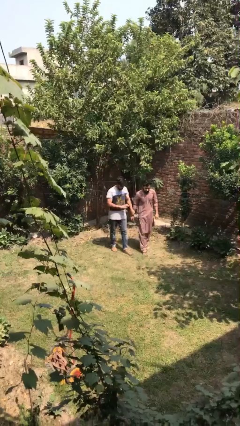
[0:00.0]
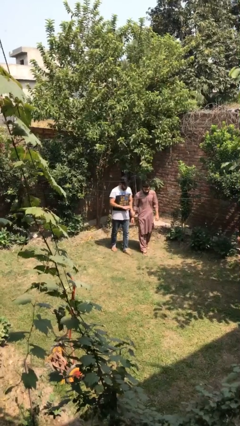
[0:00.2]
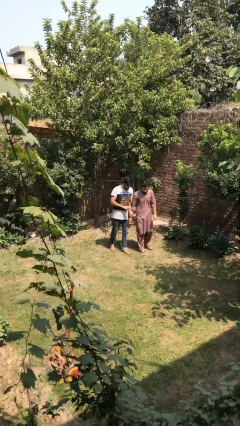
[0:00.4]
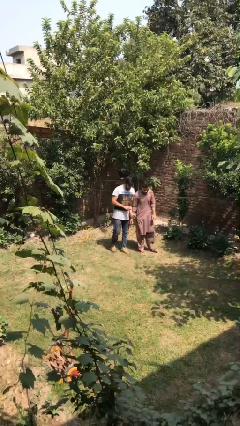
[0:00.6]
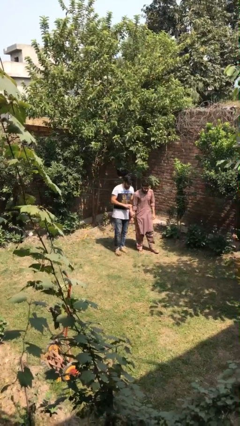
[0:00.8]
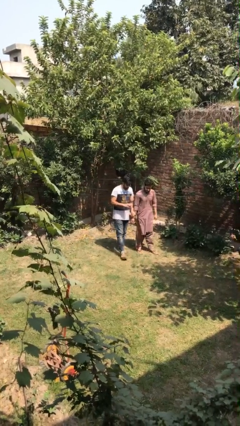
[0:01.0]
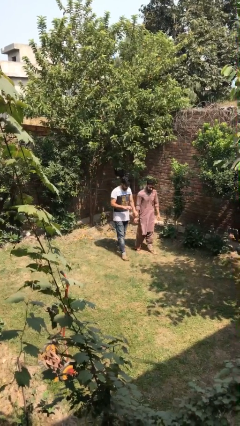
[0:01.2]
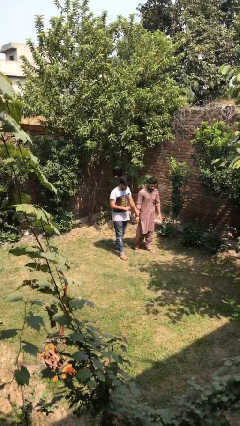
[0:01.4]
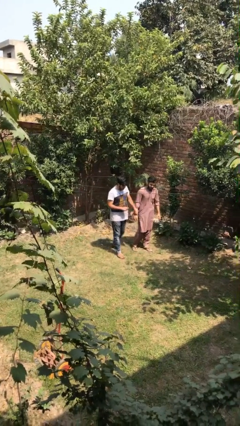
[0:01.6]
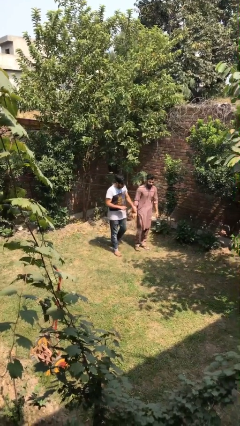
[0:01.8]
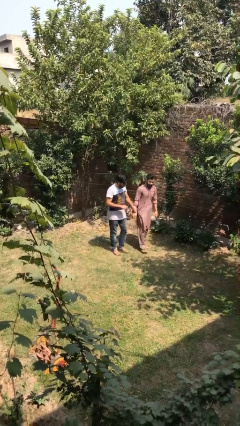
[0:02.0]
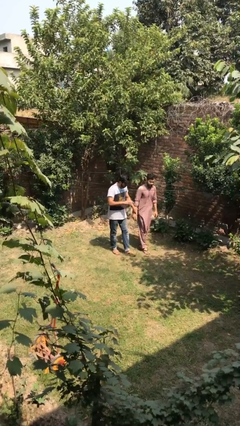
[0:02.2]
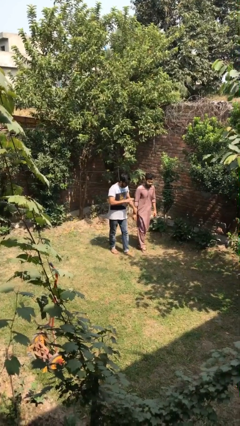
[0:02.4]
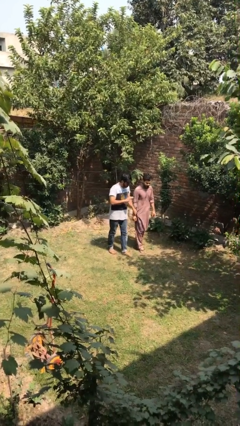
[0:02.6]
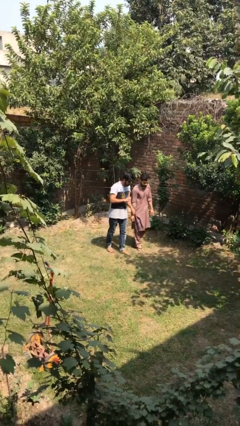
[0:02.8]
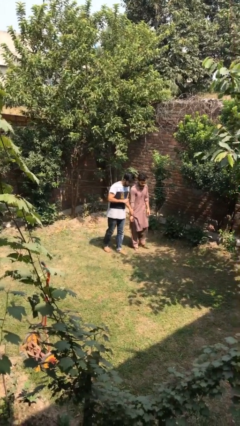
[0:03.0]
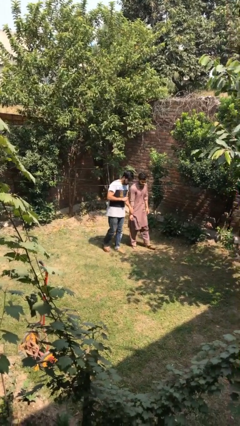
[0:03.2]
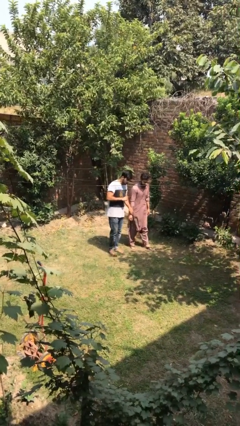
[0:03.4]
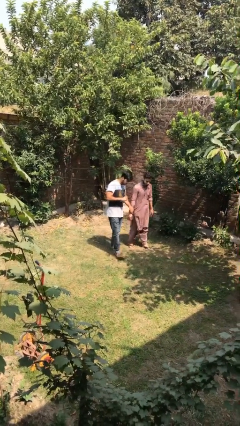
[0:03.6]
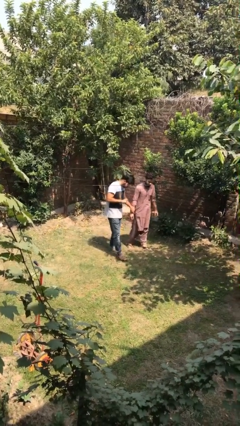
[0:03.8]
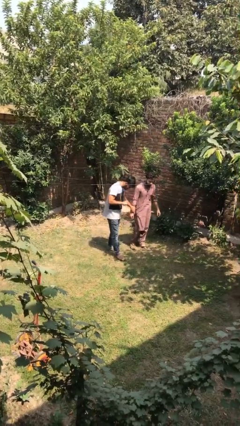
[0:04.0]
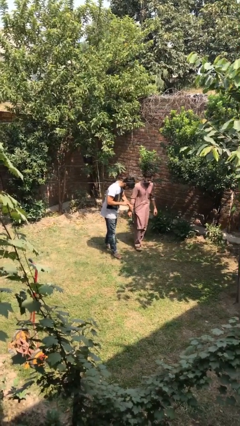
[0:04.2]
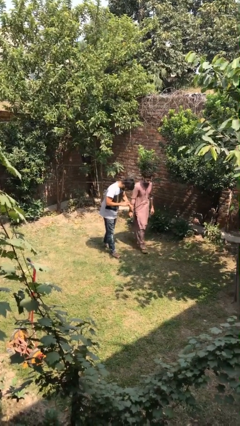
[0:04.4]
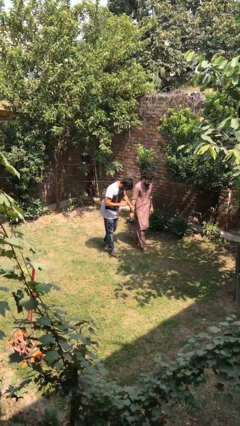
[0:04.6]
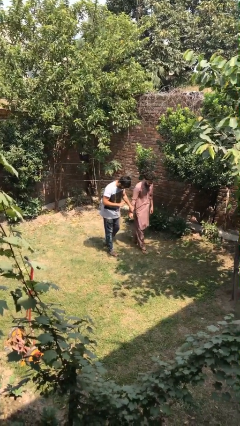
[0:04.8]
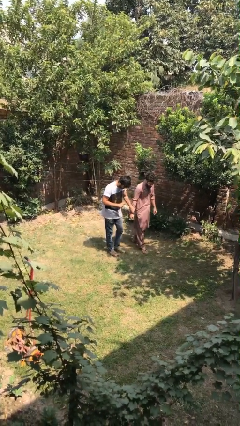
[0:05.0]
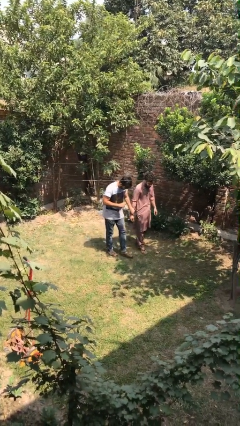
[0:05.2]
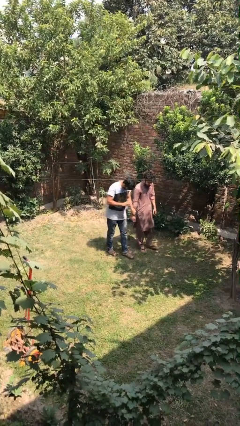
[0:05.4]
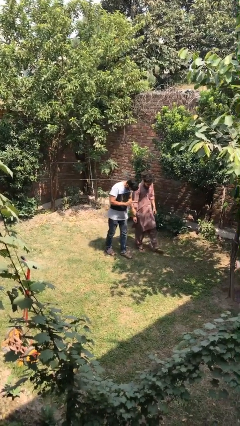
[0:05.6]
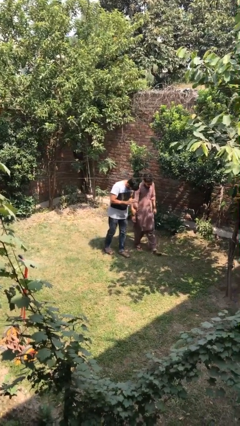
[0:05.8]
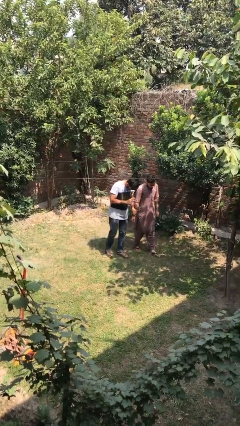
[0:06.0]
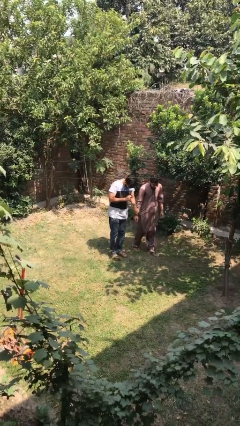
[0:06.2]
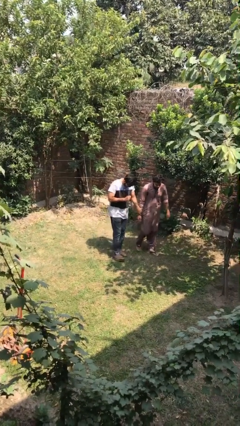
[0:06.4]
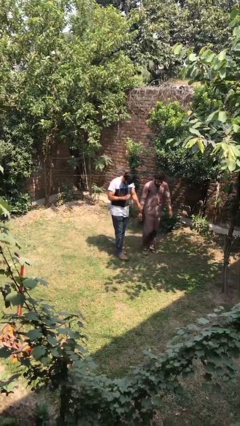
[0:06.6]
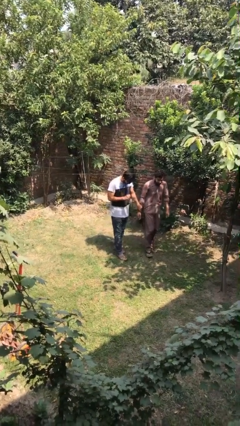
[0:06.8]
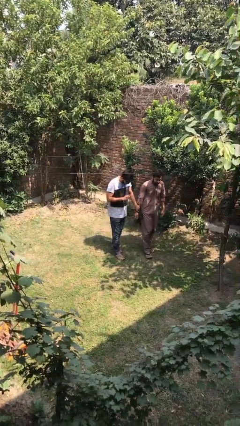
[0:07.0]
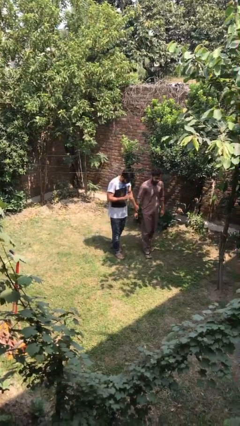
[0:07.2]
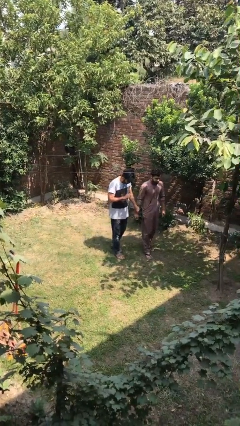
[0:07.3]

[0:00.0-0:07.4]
person holds hand

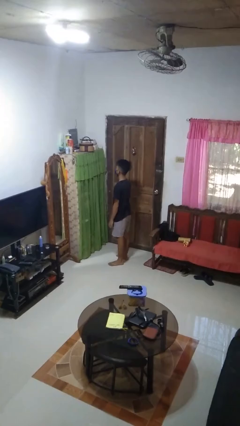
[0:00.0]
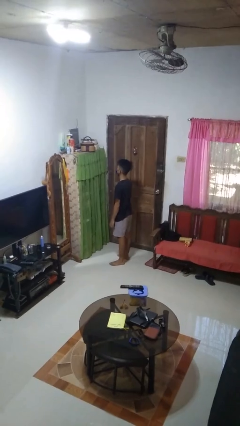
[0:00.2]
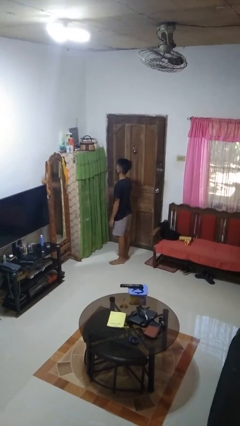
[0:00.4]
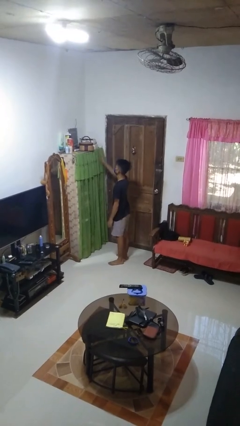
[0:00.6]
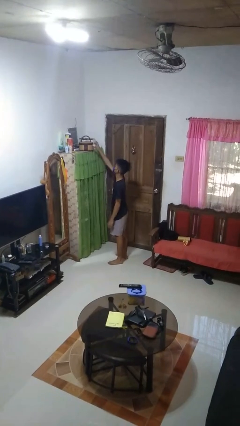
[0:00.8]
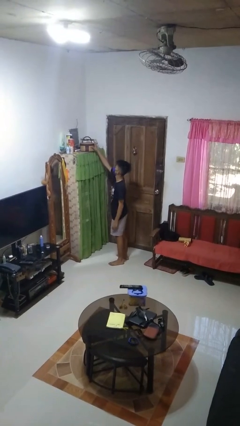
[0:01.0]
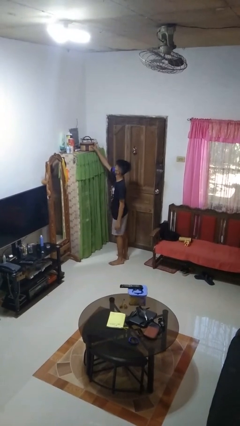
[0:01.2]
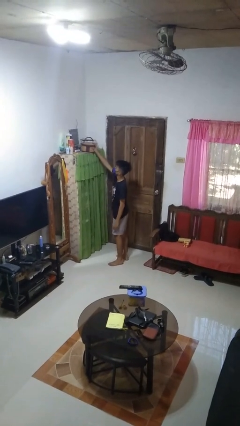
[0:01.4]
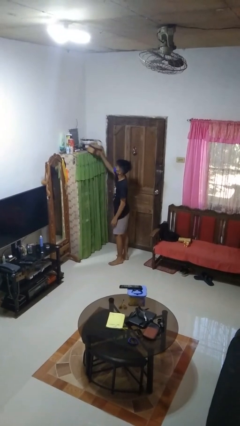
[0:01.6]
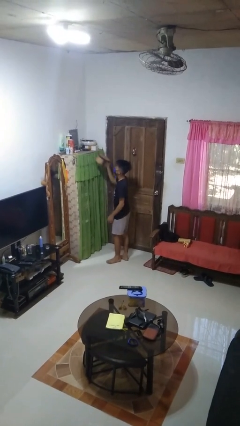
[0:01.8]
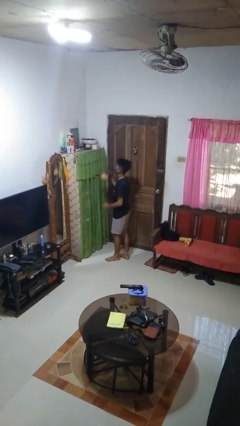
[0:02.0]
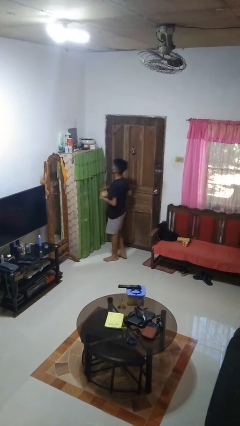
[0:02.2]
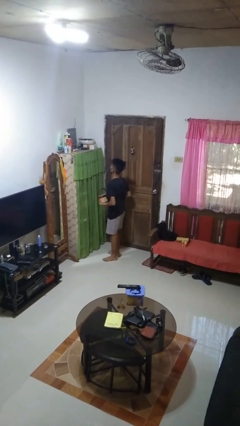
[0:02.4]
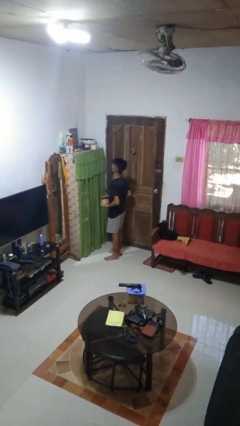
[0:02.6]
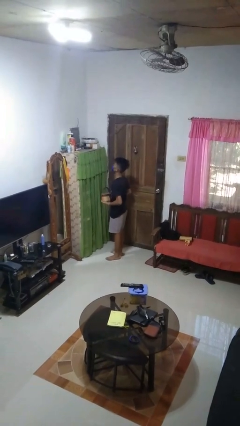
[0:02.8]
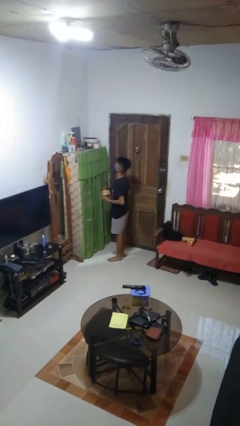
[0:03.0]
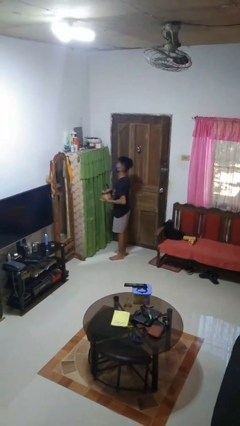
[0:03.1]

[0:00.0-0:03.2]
person picks up object from shelf

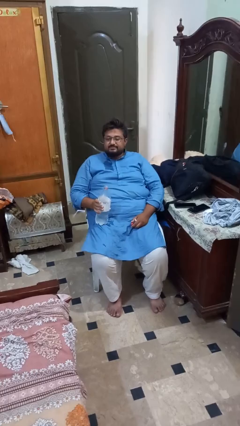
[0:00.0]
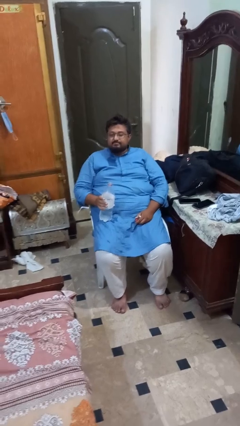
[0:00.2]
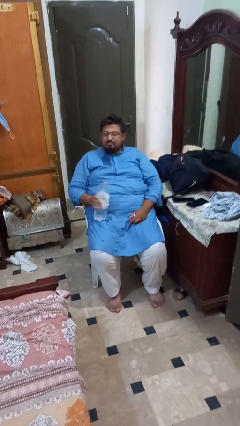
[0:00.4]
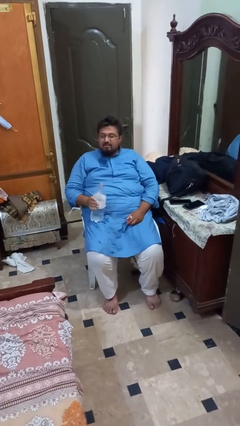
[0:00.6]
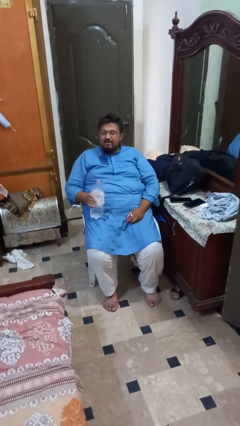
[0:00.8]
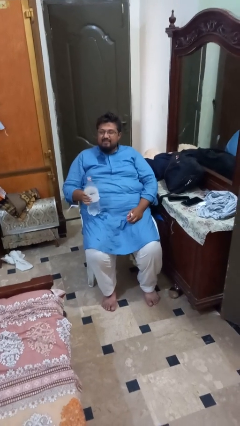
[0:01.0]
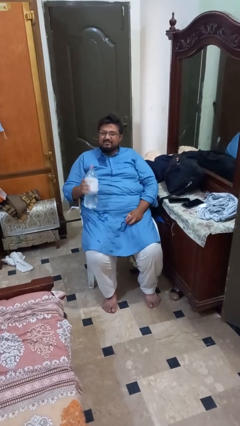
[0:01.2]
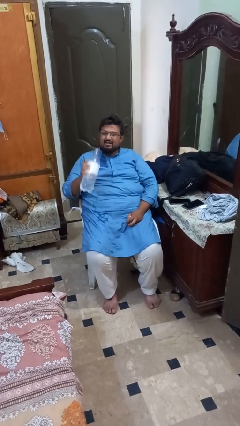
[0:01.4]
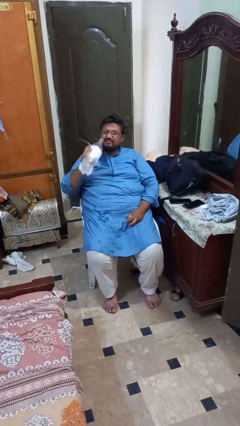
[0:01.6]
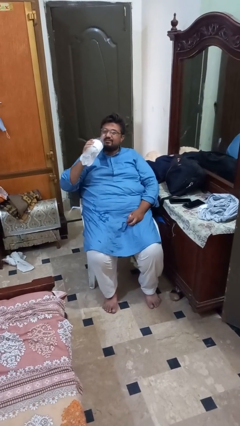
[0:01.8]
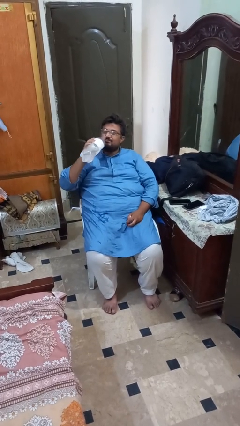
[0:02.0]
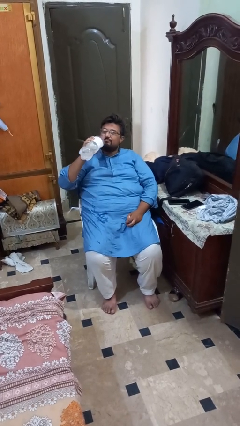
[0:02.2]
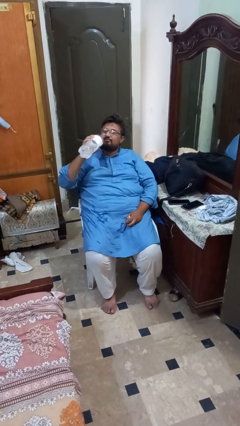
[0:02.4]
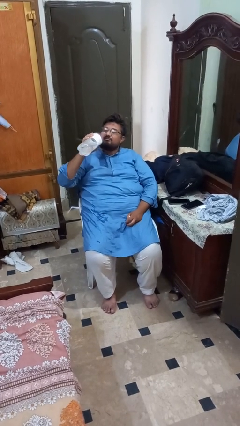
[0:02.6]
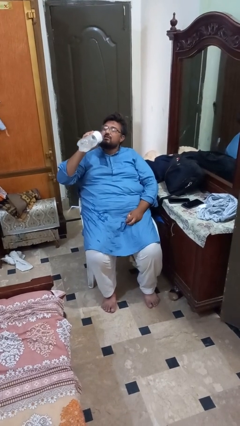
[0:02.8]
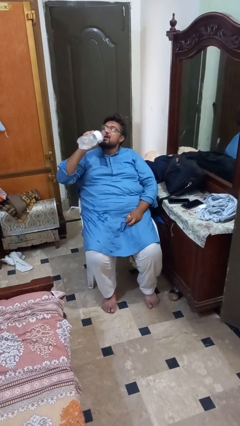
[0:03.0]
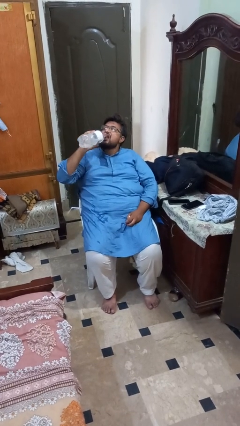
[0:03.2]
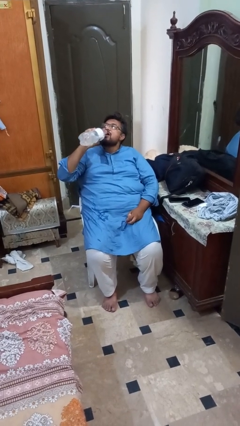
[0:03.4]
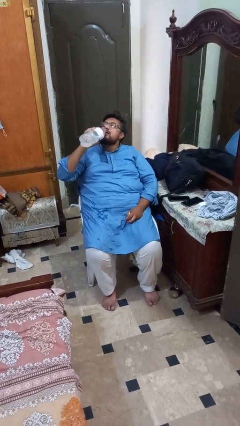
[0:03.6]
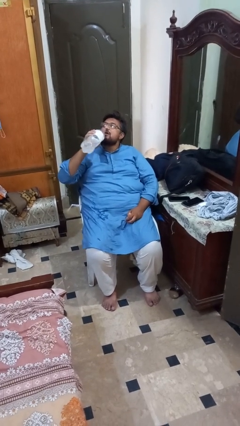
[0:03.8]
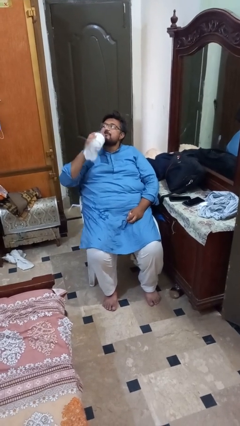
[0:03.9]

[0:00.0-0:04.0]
person drinks from bottle

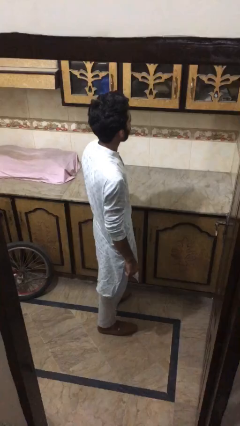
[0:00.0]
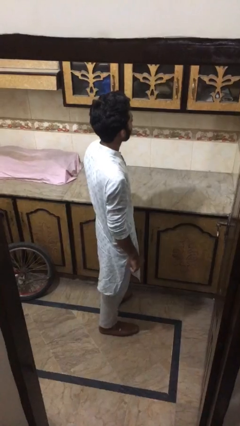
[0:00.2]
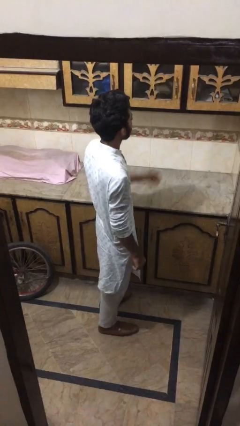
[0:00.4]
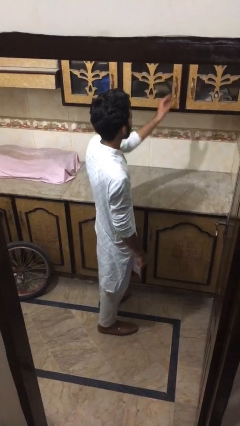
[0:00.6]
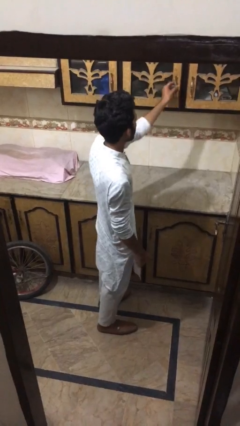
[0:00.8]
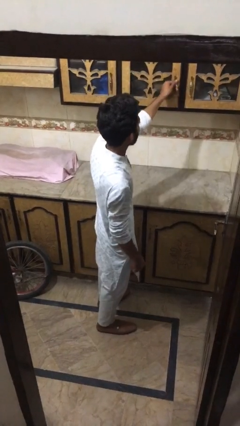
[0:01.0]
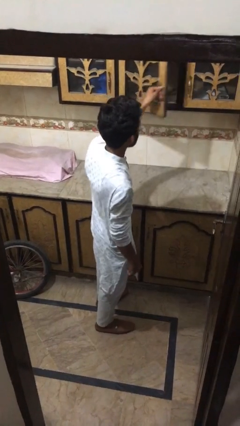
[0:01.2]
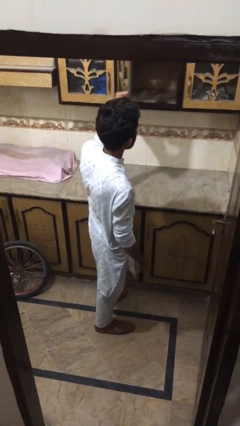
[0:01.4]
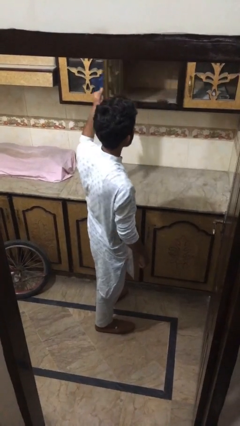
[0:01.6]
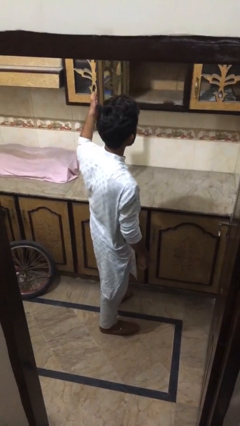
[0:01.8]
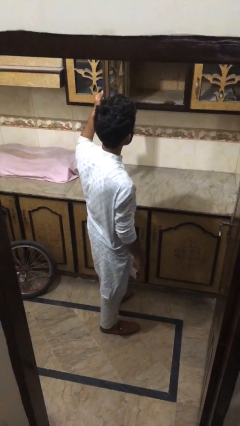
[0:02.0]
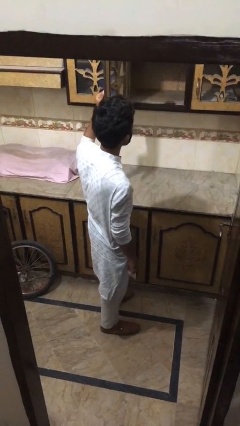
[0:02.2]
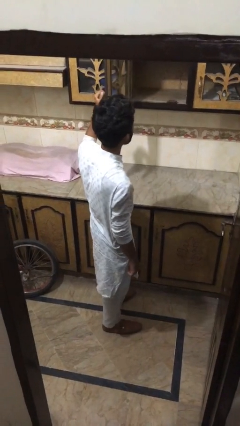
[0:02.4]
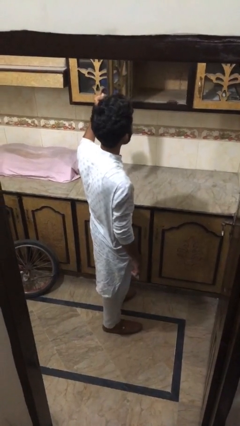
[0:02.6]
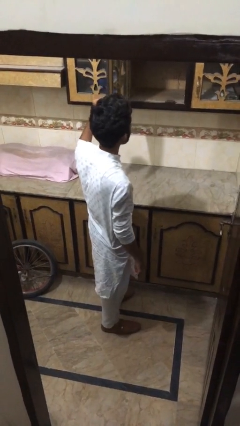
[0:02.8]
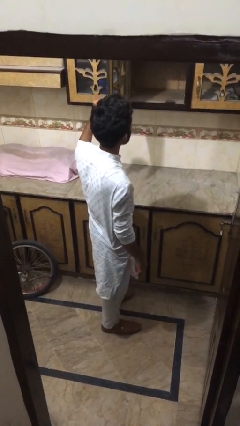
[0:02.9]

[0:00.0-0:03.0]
person opens cabinet

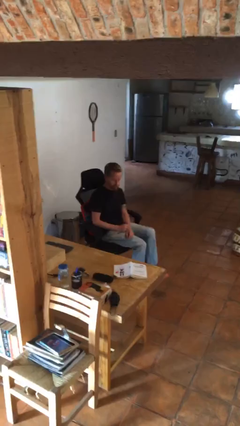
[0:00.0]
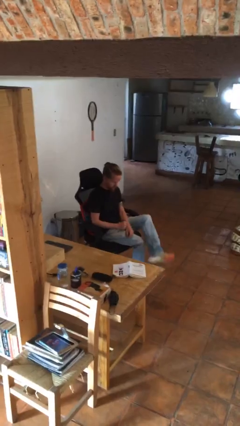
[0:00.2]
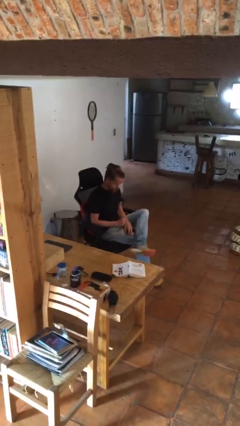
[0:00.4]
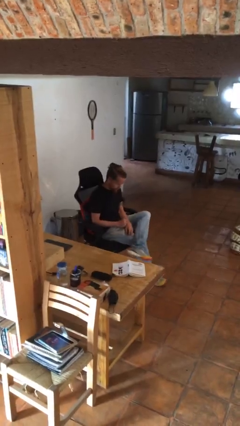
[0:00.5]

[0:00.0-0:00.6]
person looks at hands in lap
